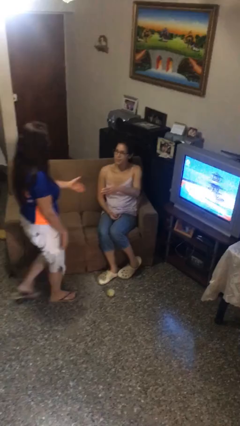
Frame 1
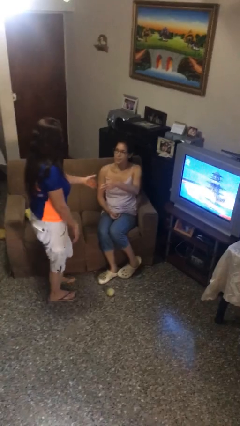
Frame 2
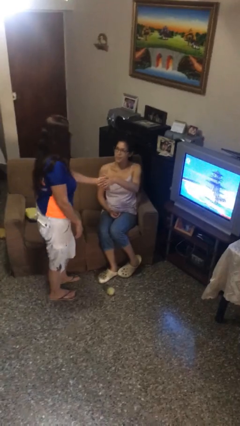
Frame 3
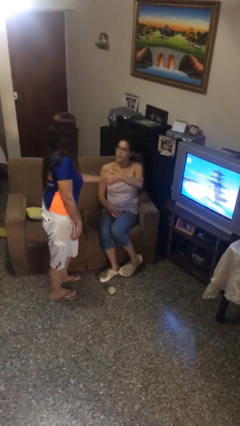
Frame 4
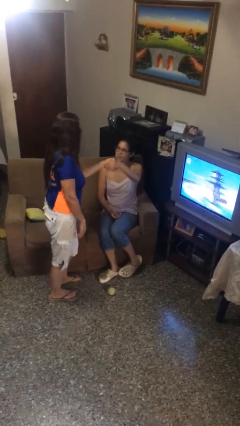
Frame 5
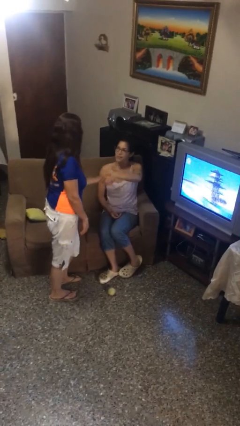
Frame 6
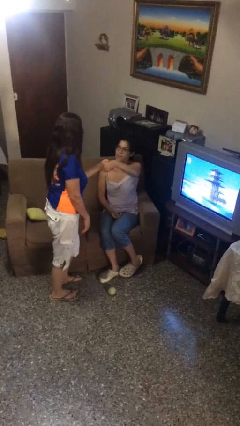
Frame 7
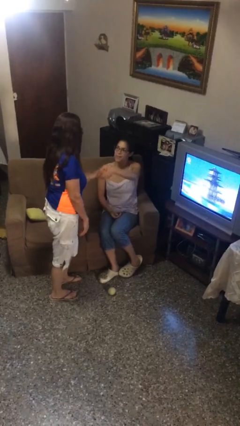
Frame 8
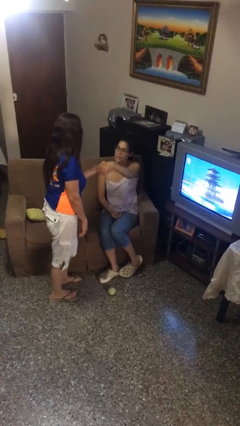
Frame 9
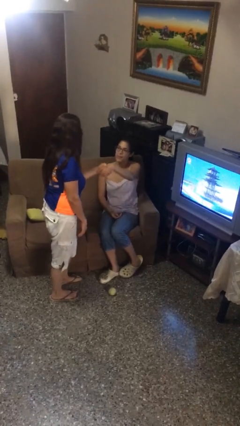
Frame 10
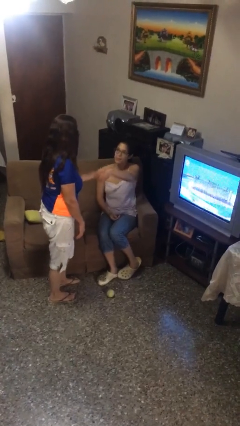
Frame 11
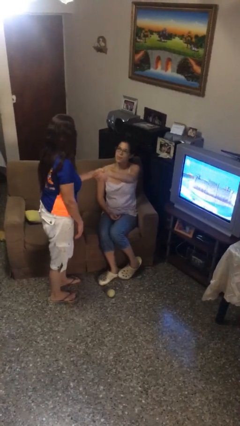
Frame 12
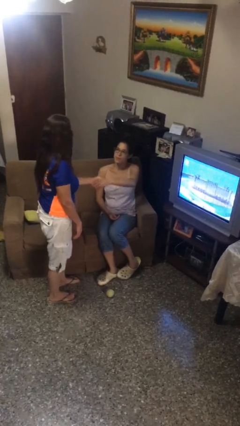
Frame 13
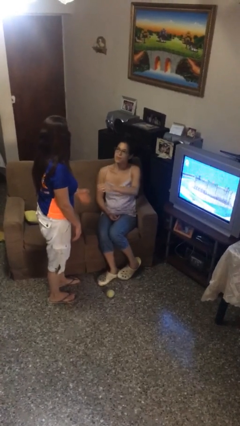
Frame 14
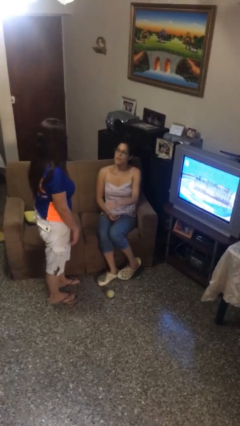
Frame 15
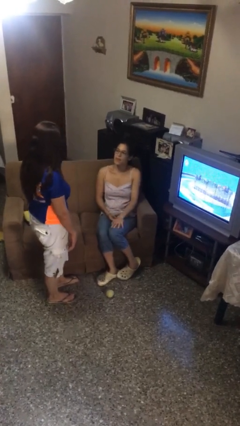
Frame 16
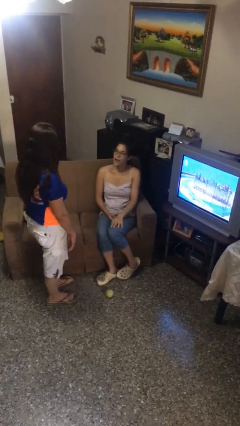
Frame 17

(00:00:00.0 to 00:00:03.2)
person shakes hand

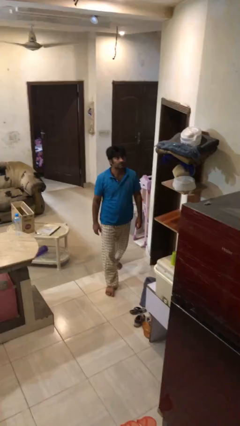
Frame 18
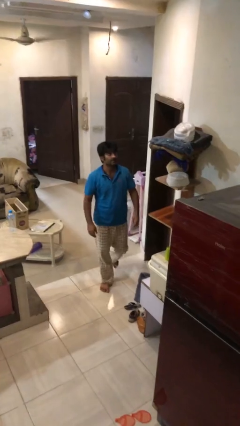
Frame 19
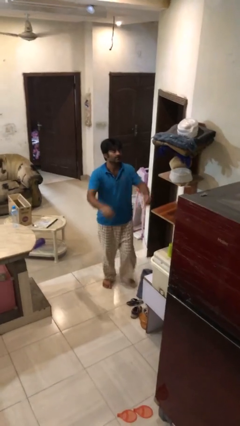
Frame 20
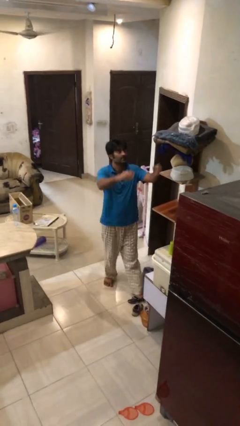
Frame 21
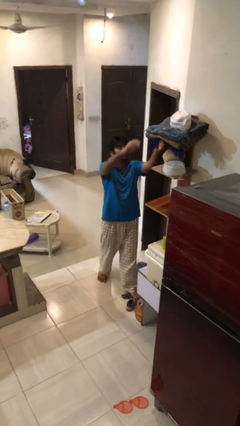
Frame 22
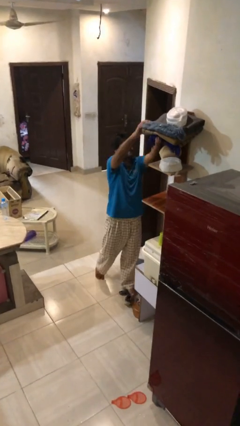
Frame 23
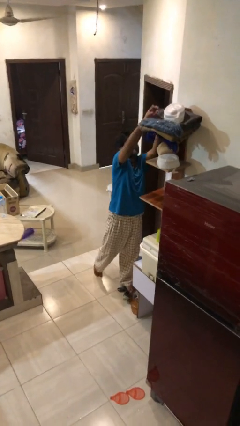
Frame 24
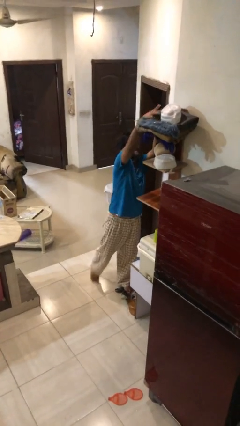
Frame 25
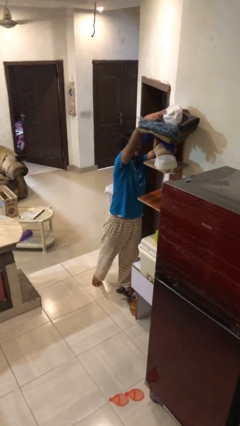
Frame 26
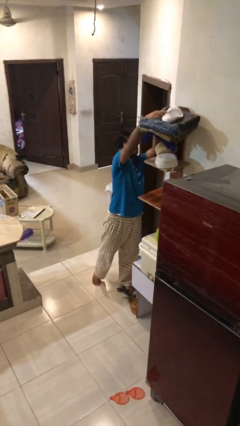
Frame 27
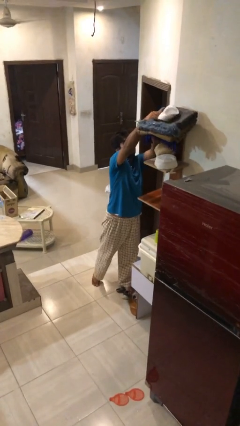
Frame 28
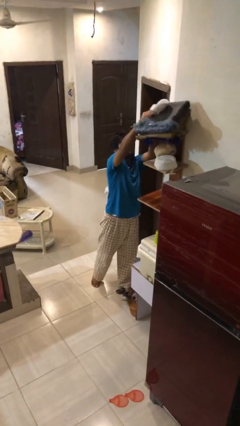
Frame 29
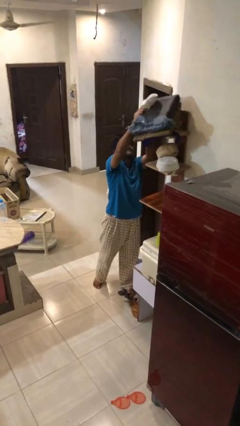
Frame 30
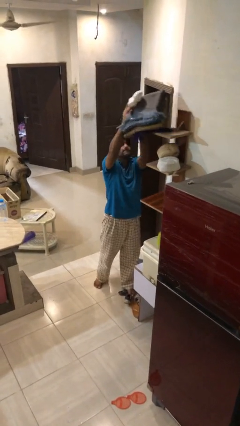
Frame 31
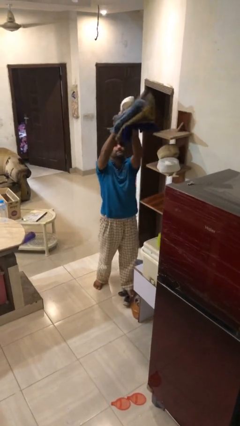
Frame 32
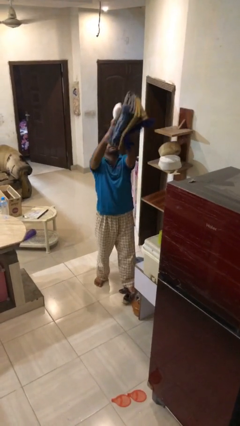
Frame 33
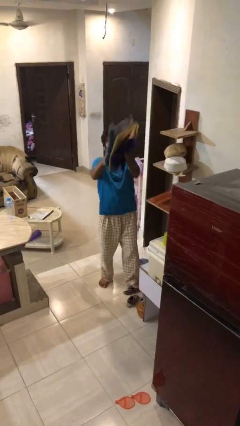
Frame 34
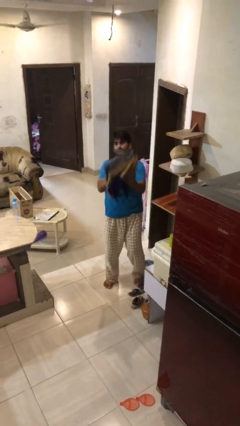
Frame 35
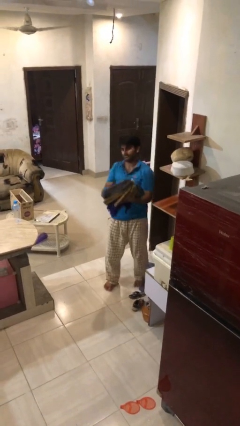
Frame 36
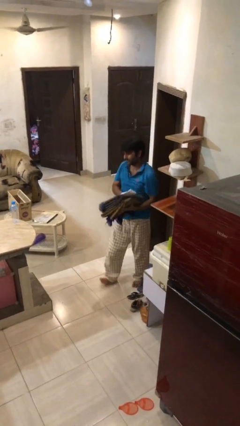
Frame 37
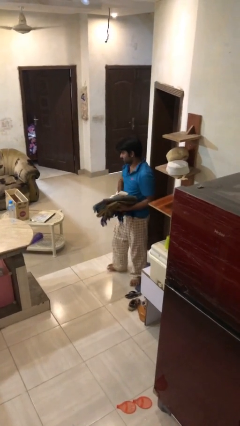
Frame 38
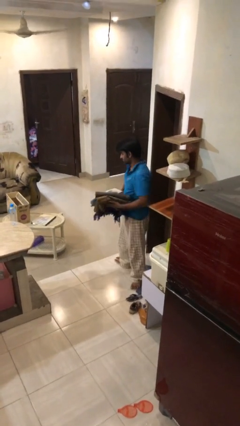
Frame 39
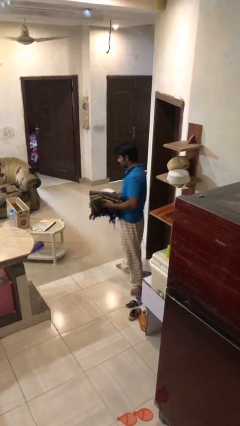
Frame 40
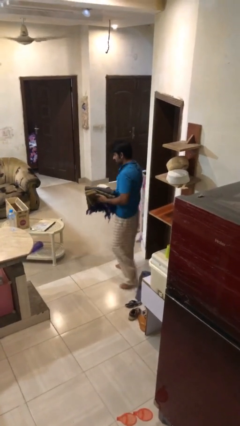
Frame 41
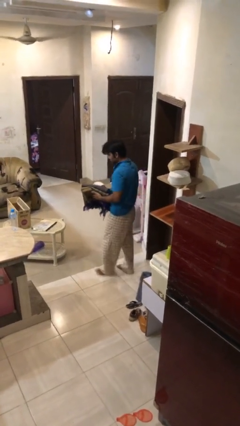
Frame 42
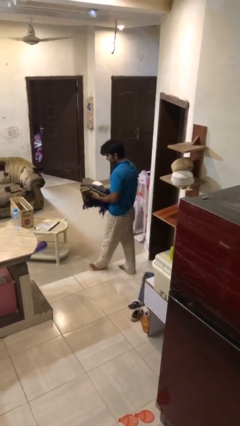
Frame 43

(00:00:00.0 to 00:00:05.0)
person picks up object from shelf

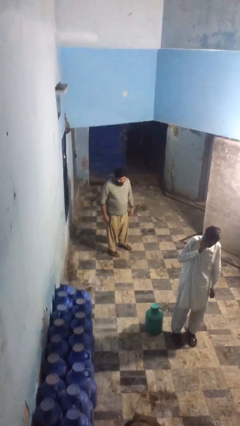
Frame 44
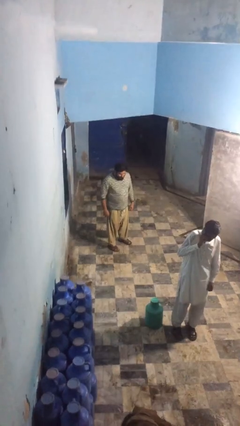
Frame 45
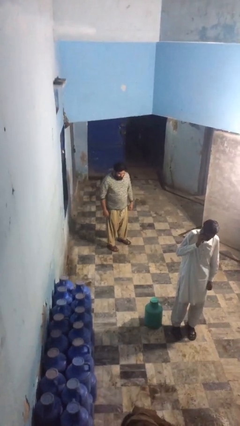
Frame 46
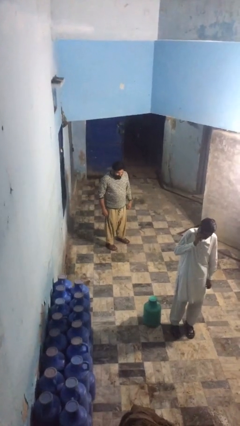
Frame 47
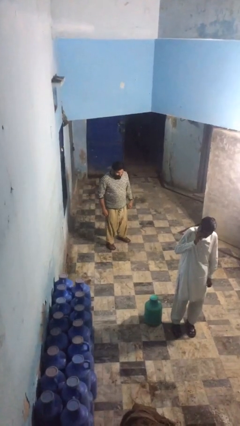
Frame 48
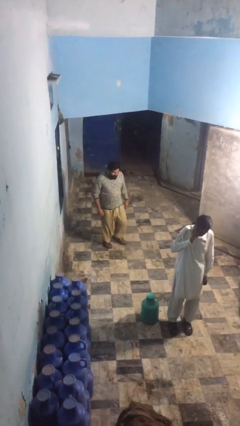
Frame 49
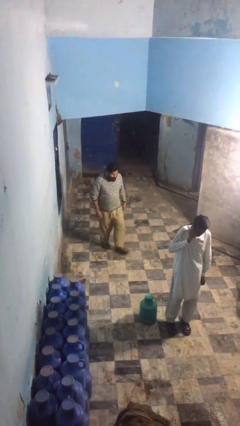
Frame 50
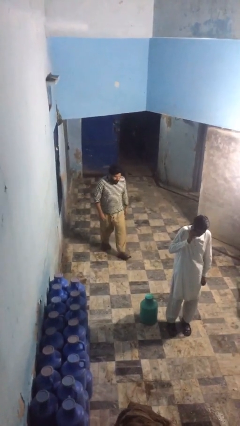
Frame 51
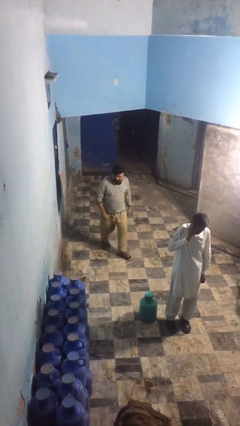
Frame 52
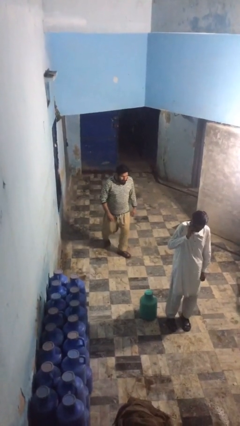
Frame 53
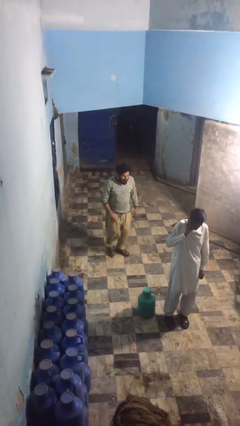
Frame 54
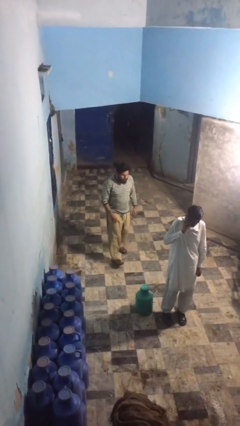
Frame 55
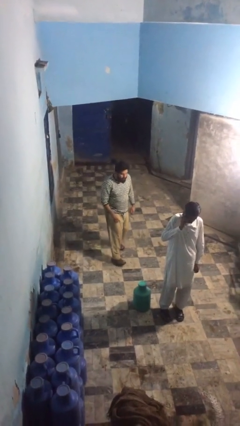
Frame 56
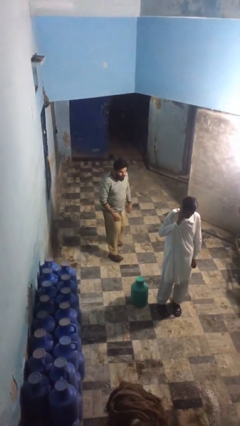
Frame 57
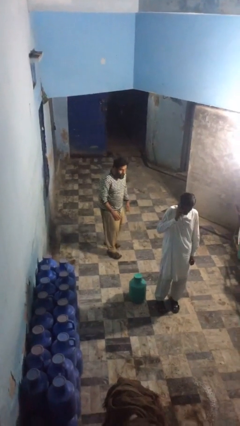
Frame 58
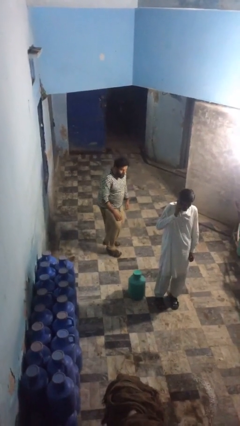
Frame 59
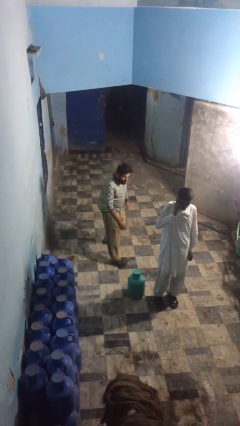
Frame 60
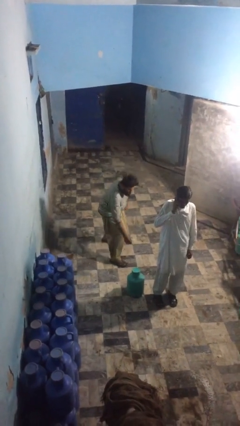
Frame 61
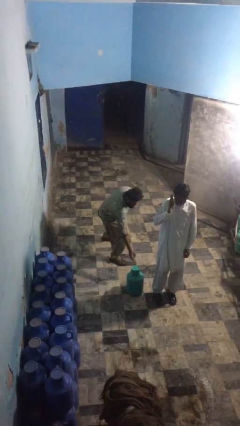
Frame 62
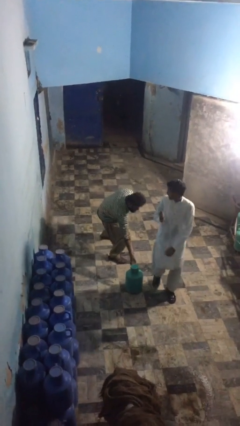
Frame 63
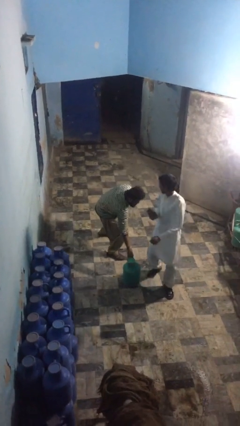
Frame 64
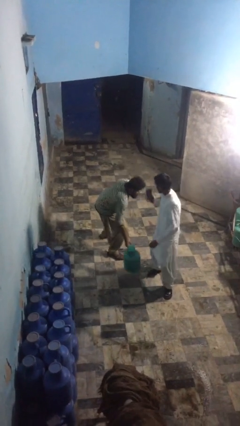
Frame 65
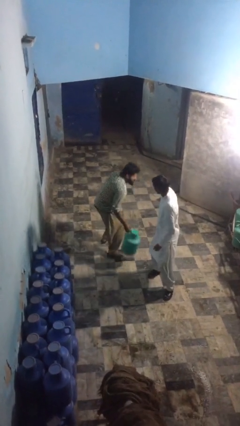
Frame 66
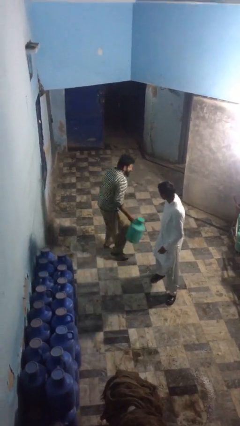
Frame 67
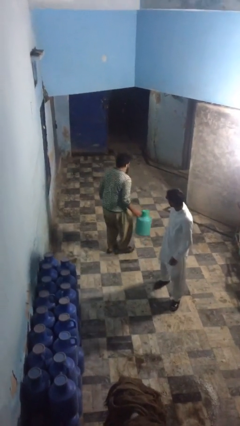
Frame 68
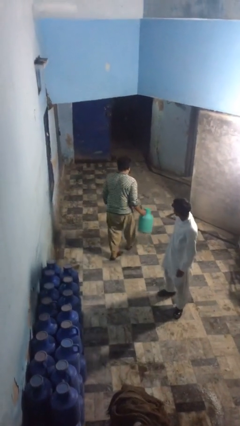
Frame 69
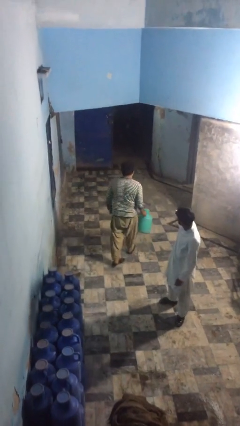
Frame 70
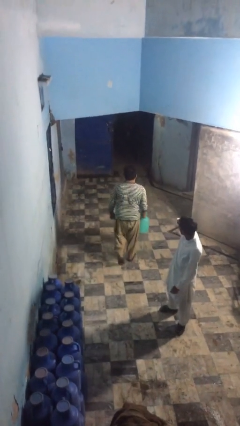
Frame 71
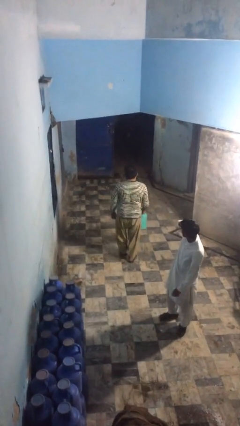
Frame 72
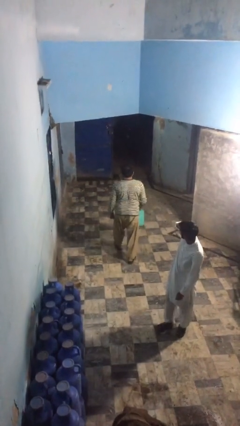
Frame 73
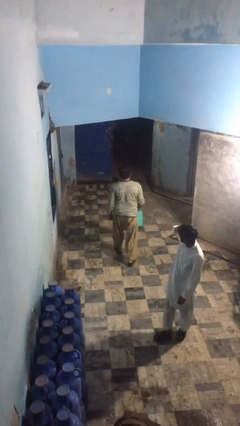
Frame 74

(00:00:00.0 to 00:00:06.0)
person steals object from person

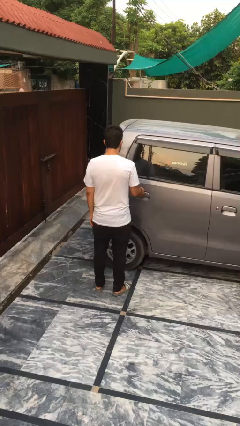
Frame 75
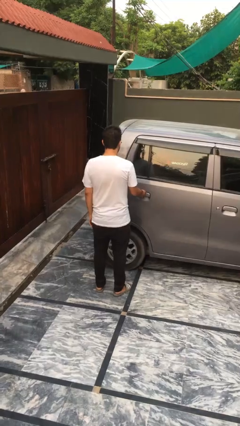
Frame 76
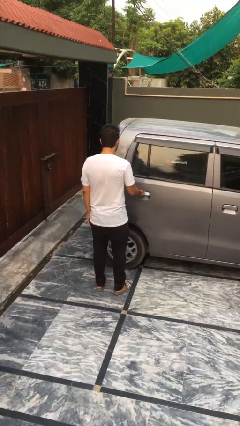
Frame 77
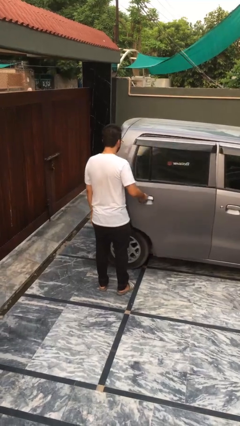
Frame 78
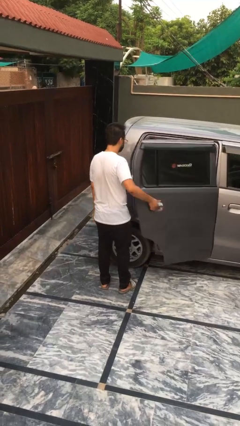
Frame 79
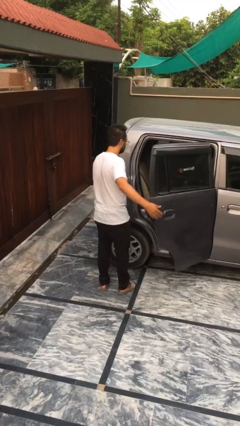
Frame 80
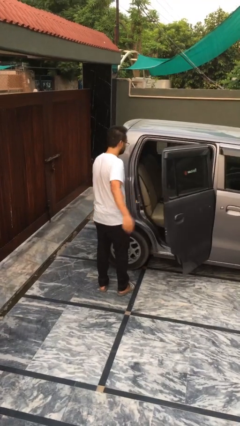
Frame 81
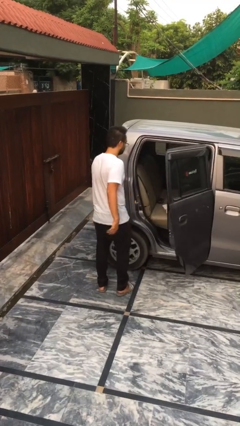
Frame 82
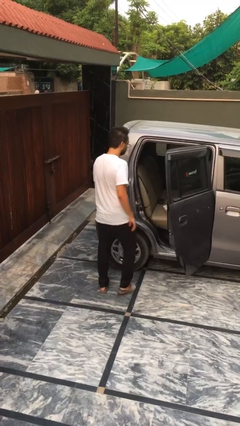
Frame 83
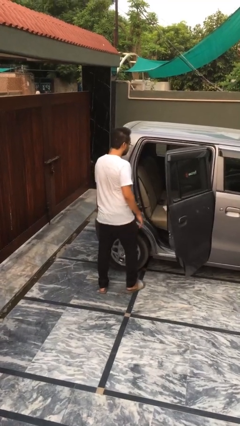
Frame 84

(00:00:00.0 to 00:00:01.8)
person opens car door

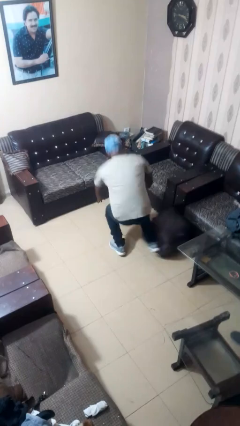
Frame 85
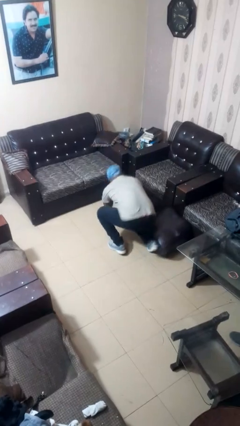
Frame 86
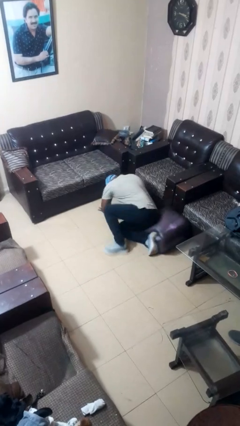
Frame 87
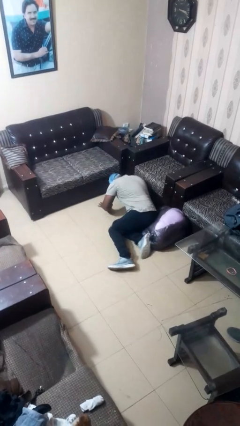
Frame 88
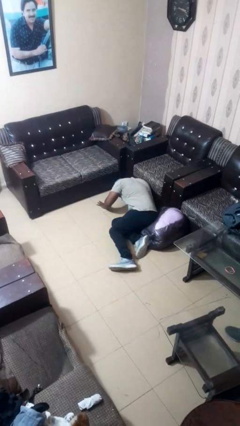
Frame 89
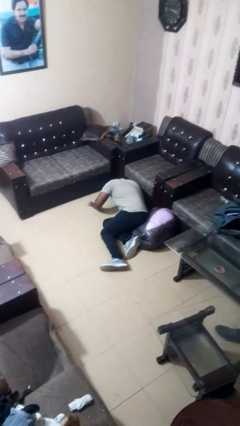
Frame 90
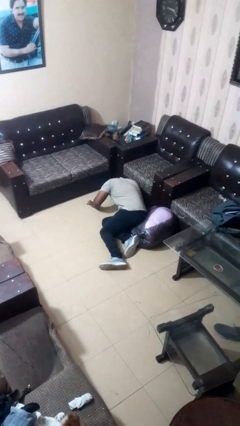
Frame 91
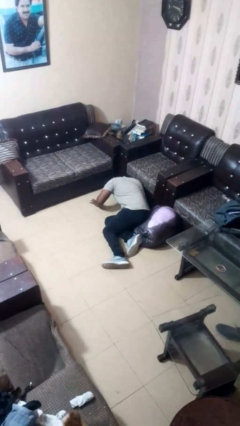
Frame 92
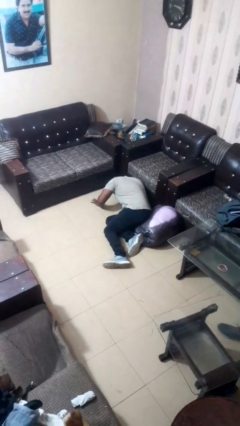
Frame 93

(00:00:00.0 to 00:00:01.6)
person lies down on floor
